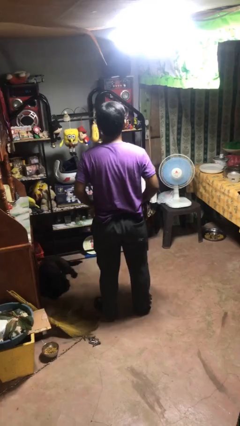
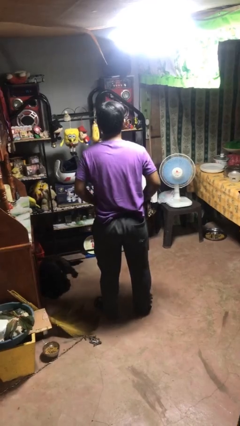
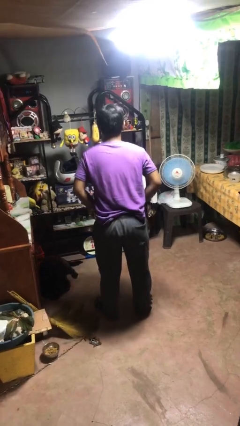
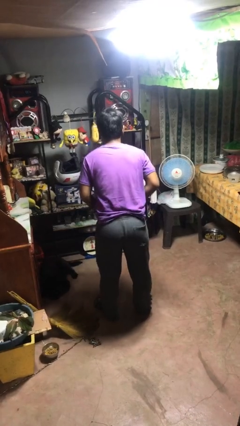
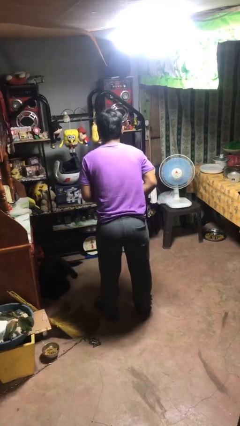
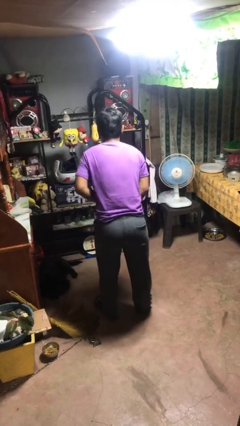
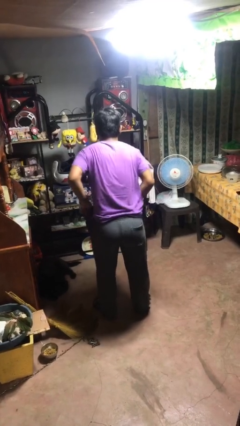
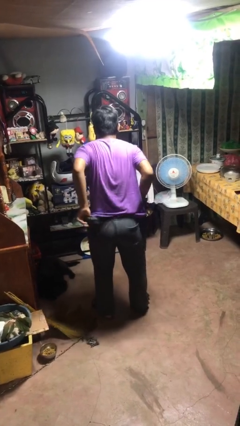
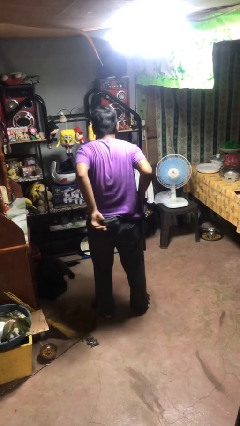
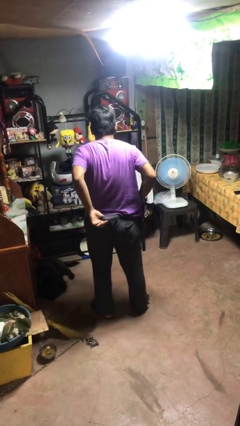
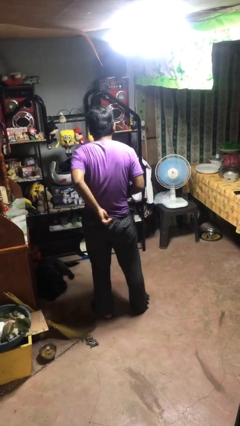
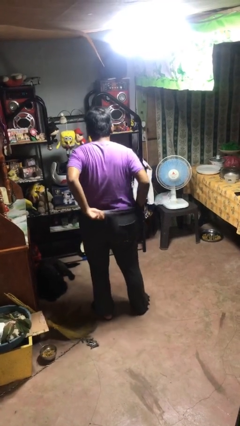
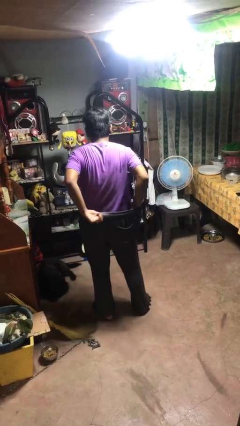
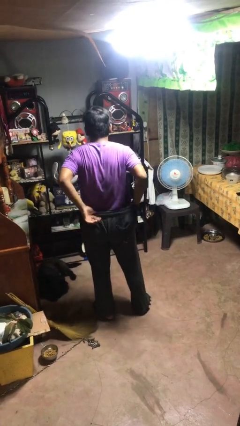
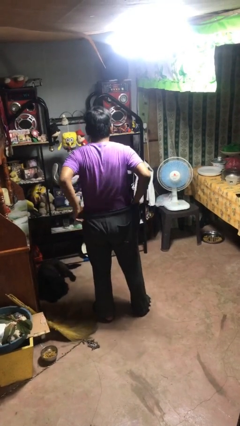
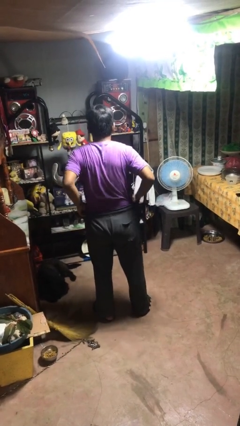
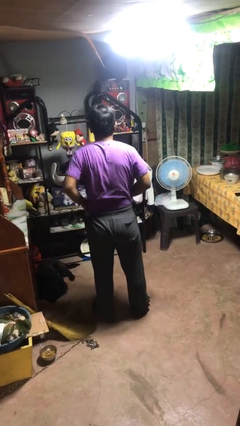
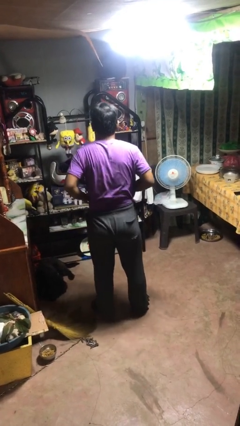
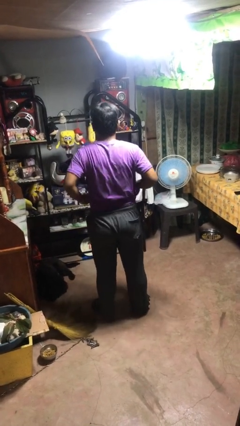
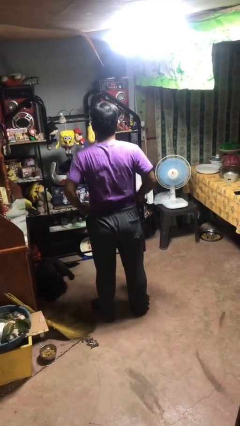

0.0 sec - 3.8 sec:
person tucks in shirt

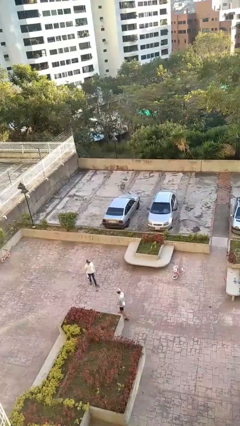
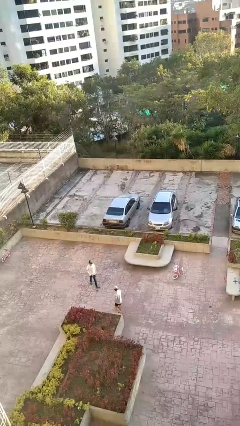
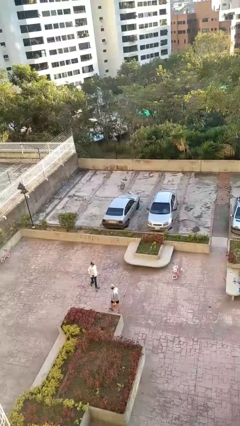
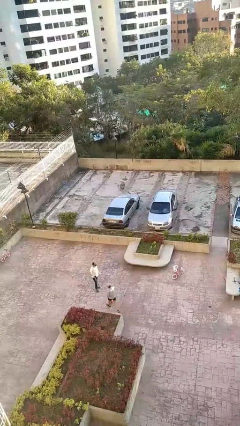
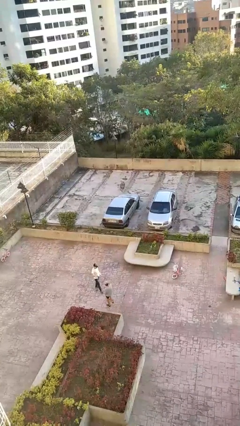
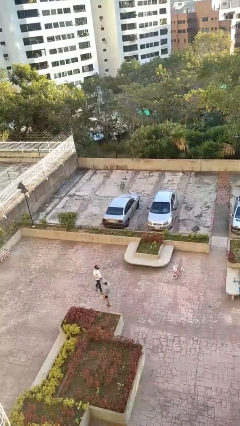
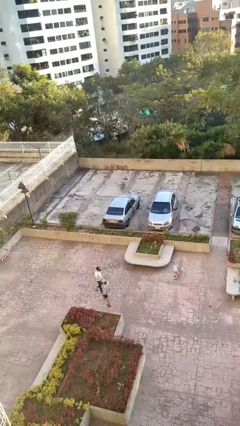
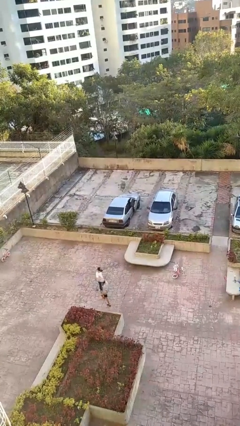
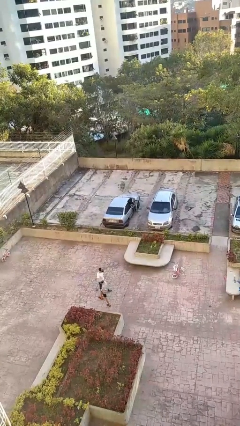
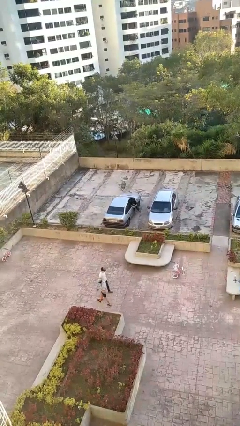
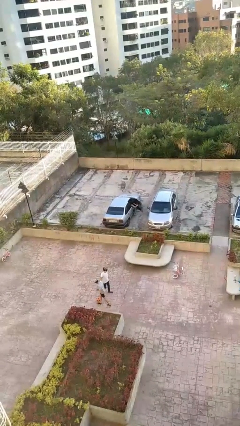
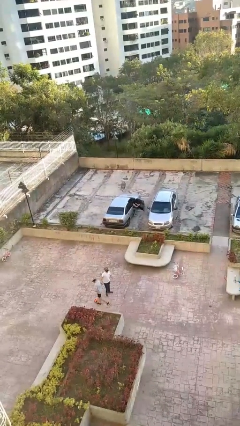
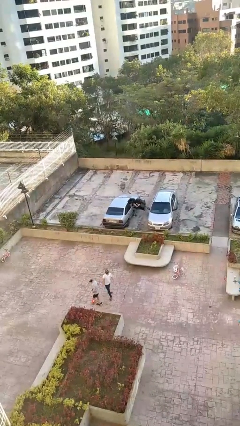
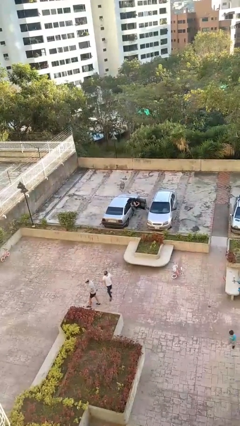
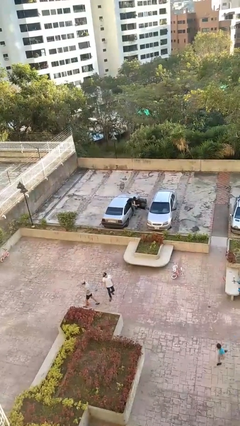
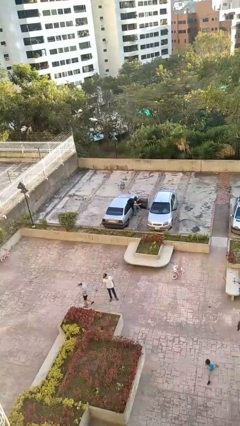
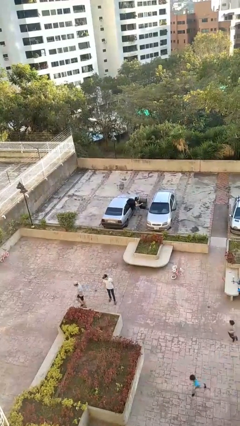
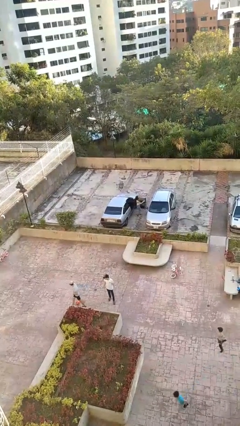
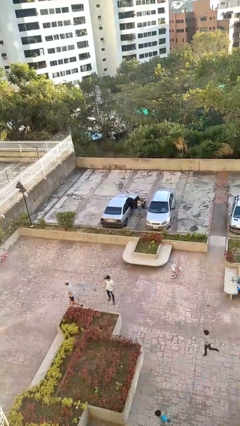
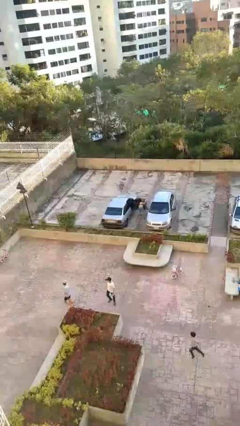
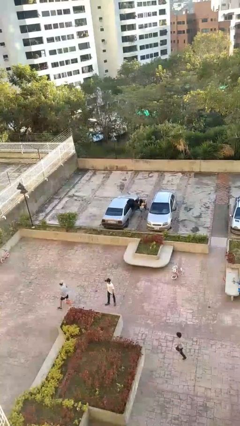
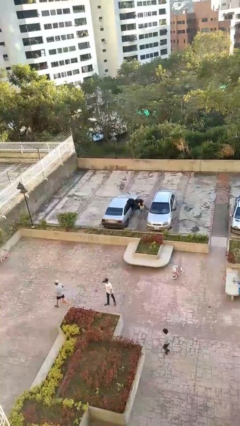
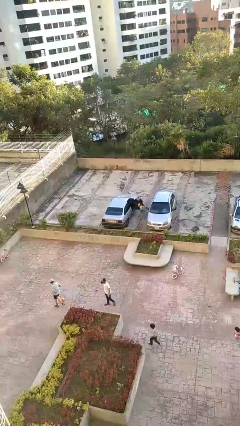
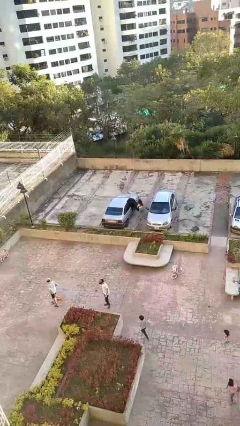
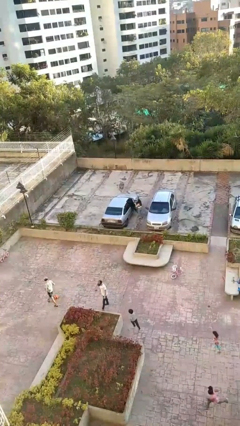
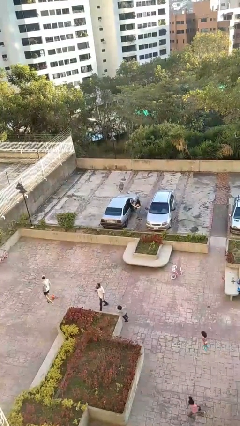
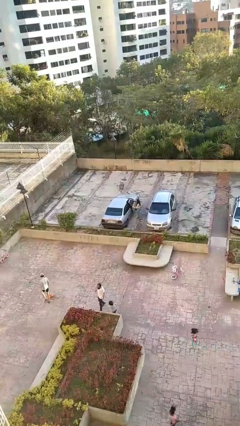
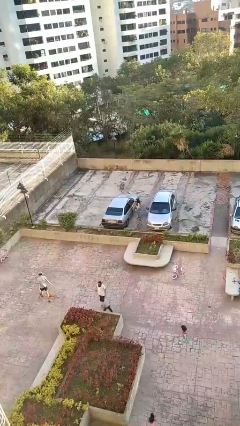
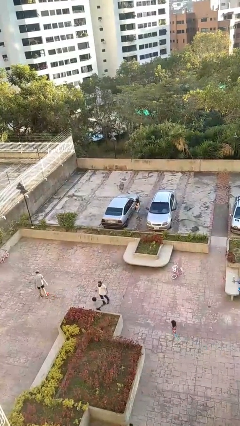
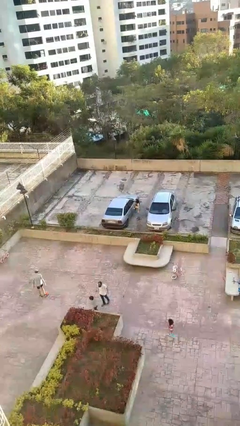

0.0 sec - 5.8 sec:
car drops off person

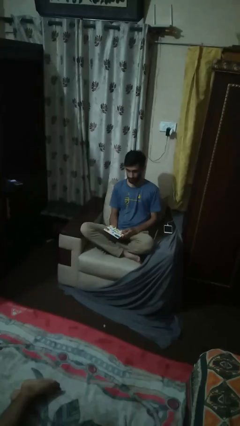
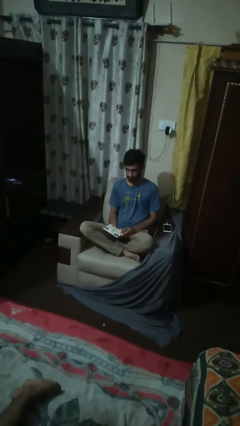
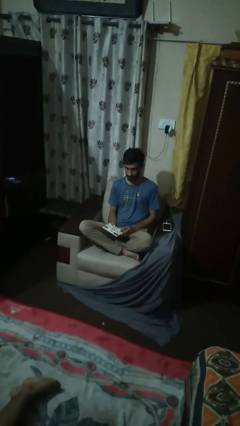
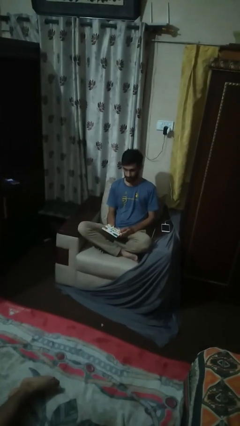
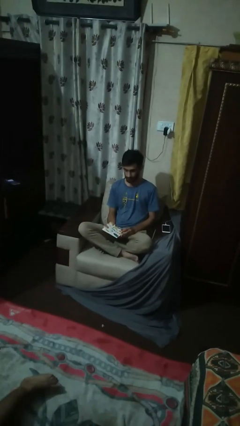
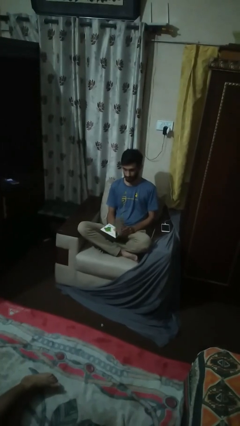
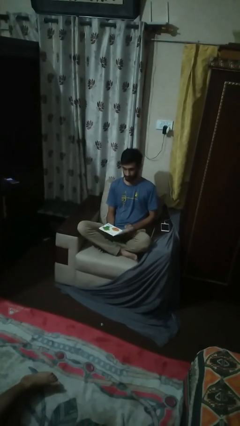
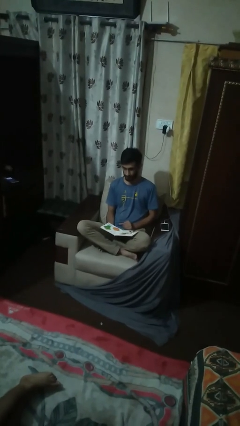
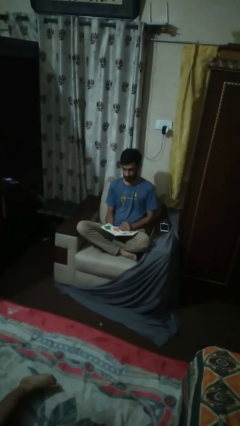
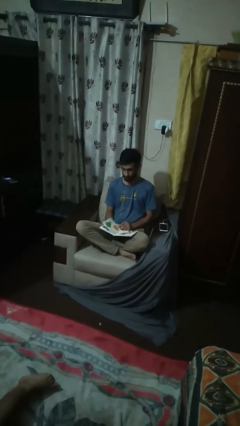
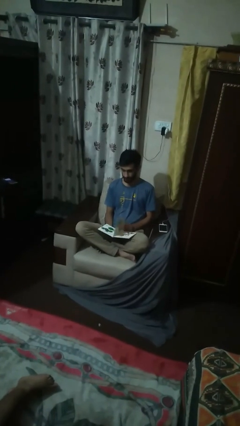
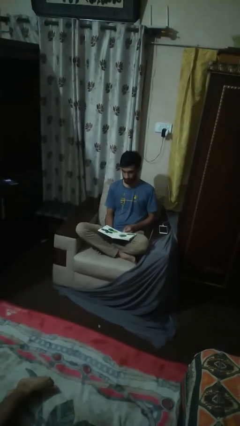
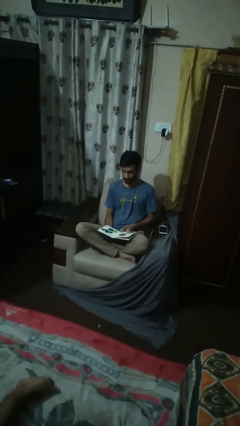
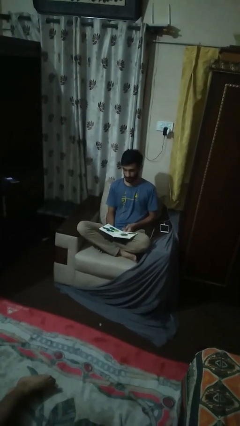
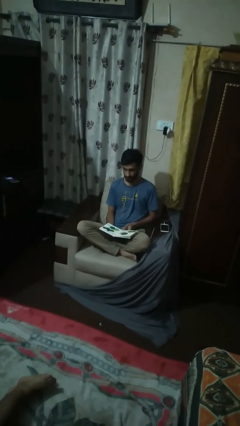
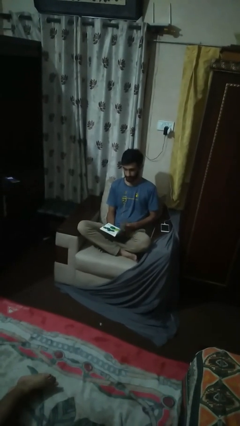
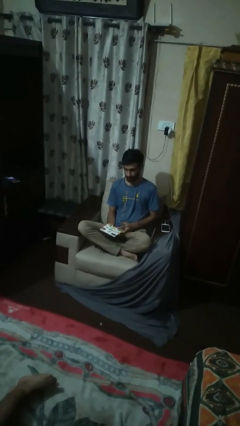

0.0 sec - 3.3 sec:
person reads magazine

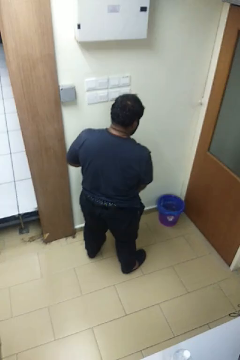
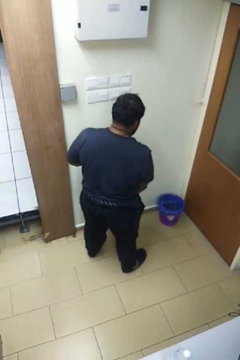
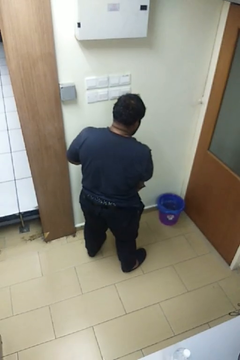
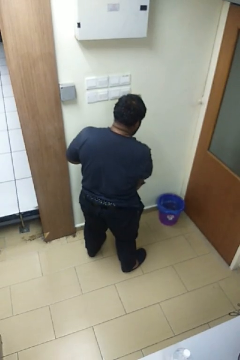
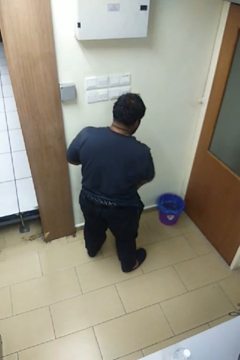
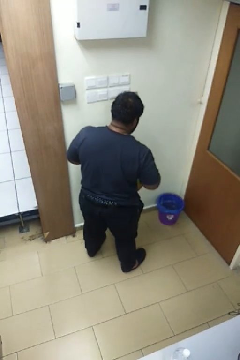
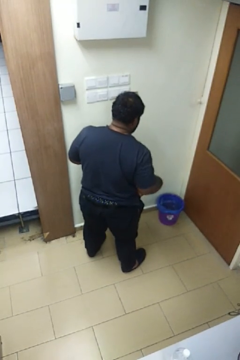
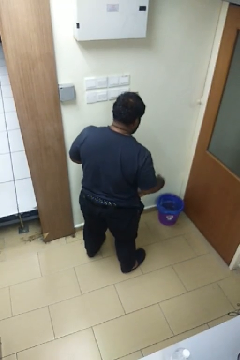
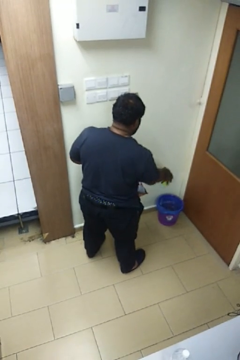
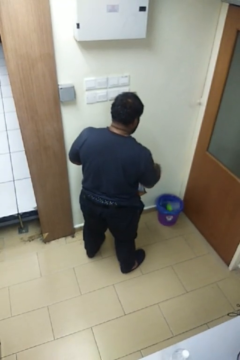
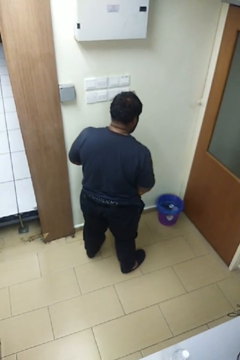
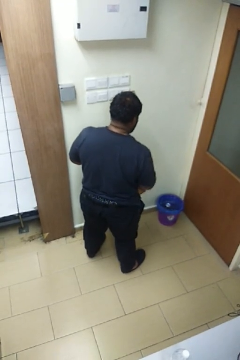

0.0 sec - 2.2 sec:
person discards trash

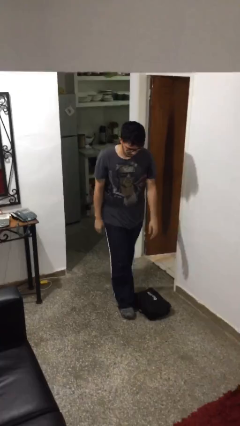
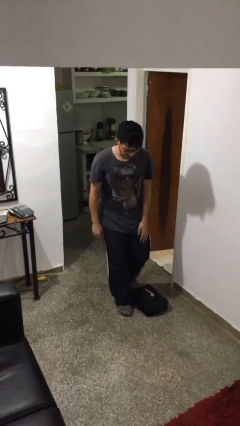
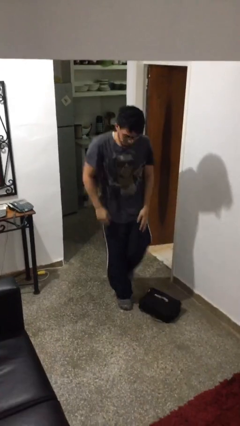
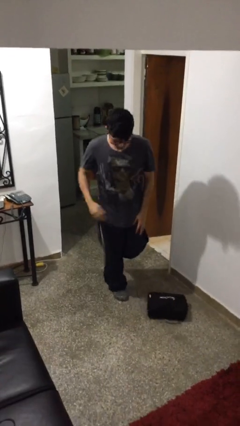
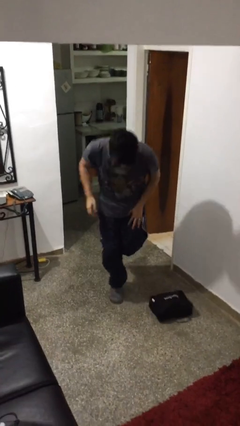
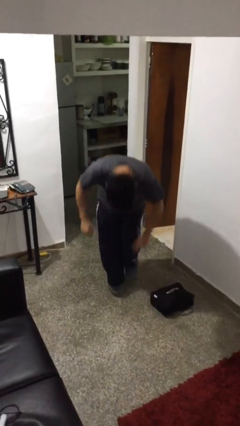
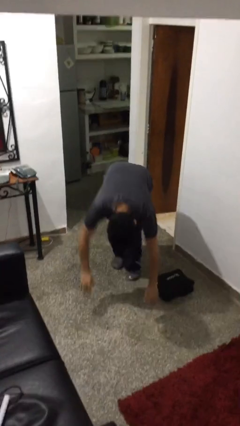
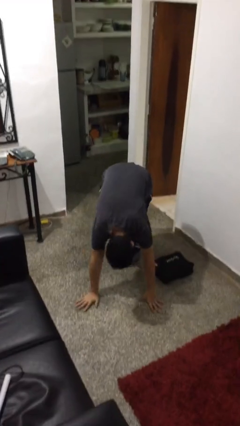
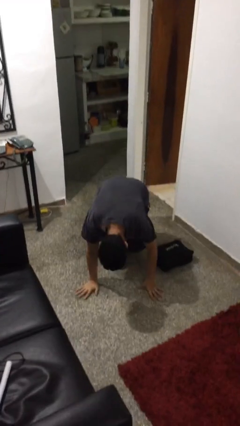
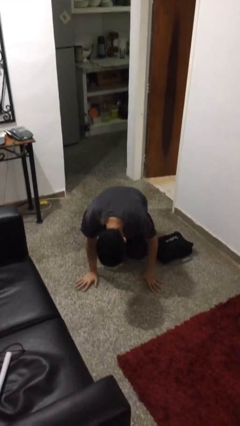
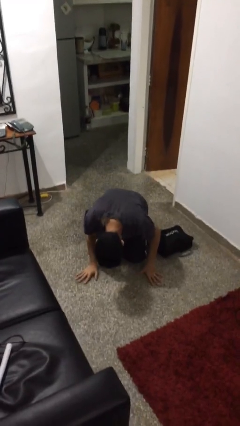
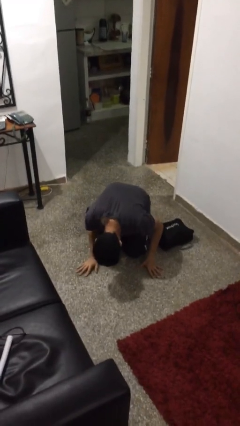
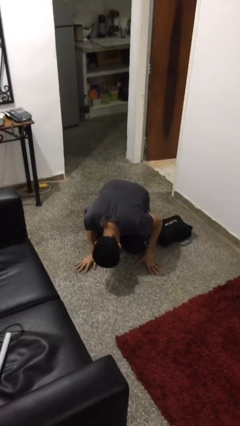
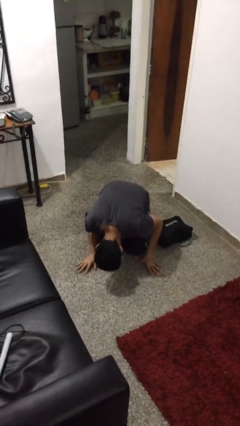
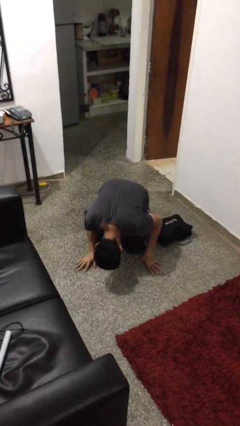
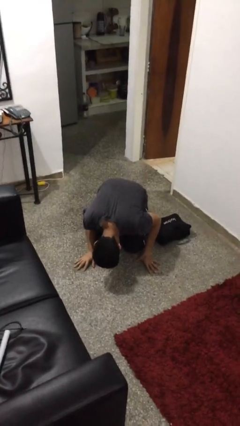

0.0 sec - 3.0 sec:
person trips on object on floor
